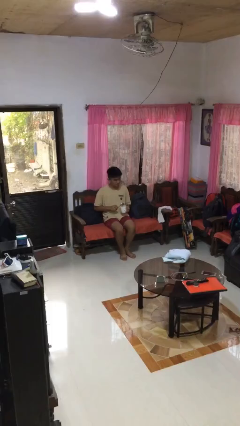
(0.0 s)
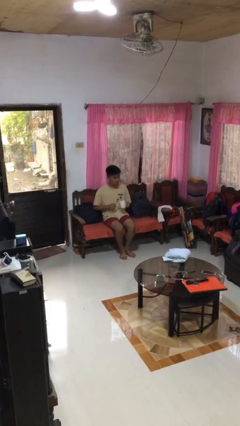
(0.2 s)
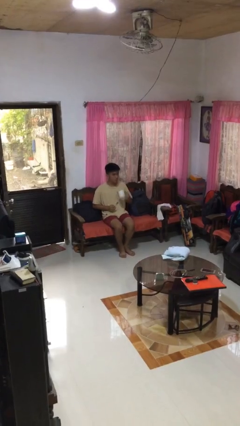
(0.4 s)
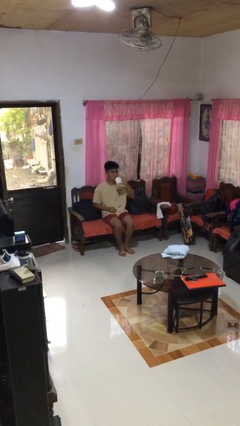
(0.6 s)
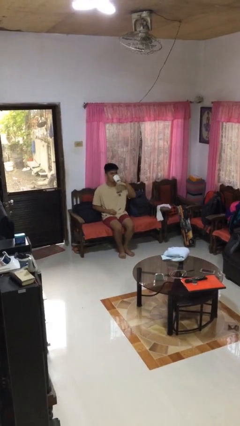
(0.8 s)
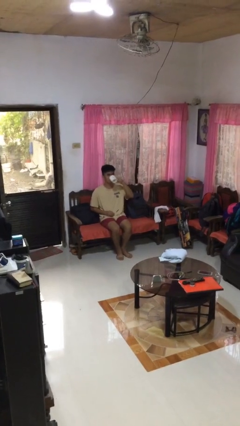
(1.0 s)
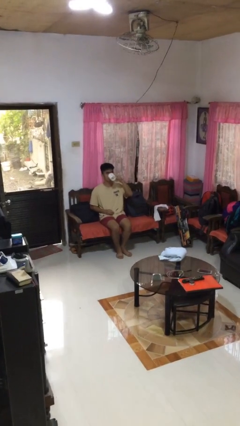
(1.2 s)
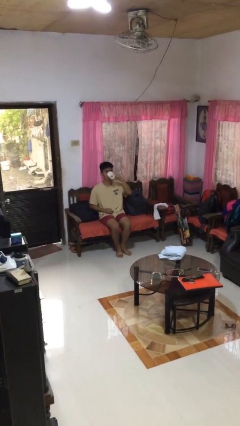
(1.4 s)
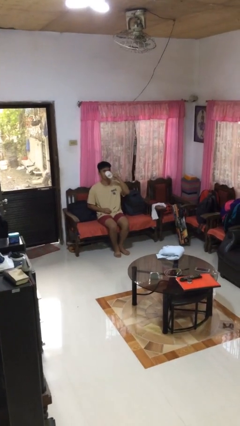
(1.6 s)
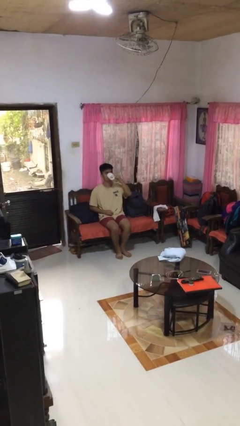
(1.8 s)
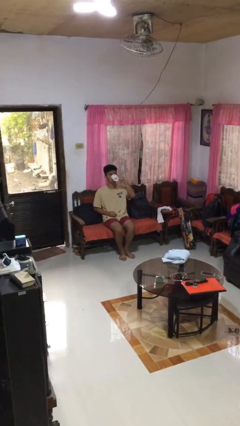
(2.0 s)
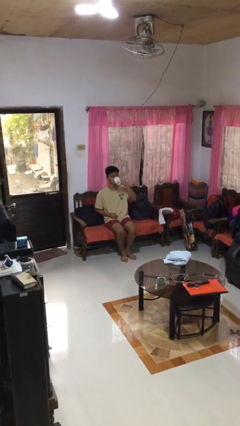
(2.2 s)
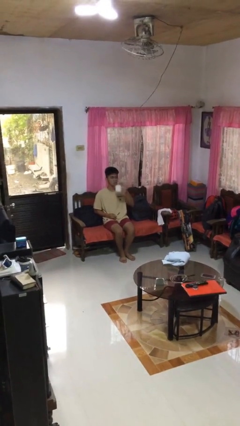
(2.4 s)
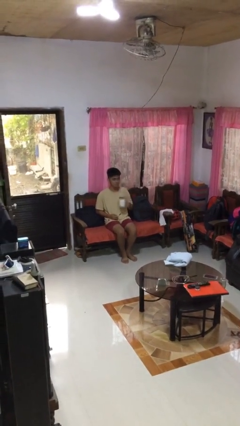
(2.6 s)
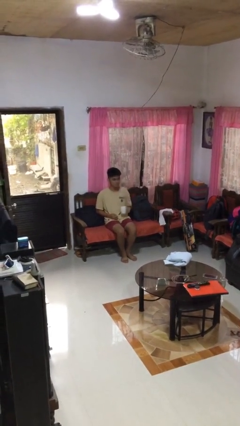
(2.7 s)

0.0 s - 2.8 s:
person drinks from mug

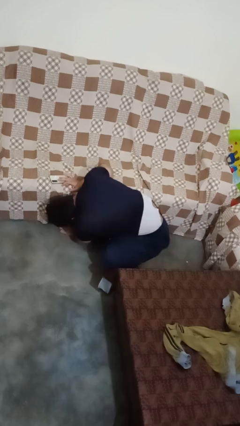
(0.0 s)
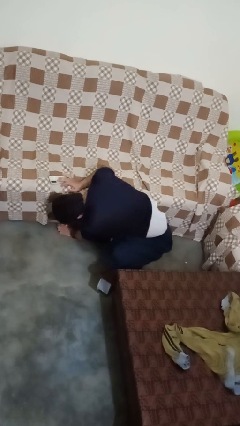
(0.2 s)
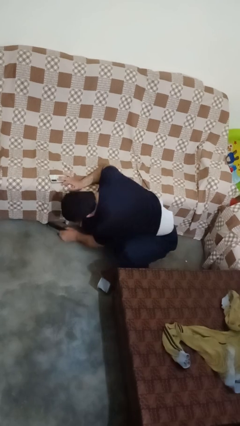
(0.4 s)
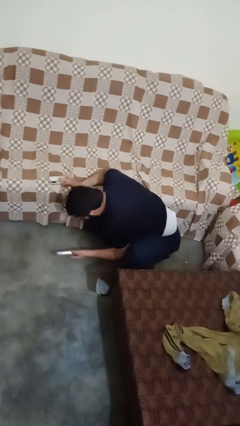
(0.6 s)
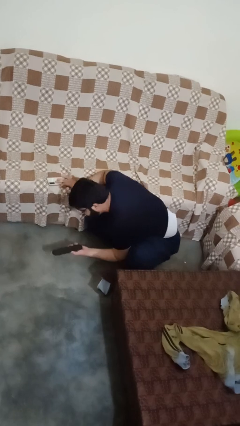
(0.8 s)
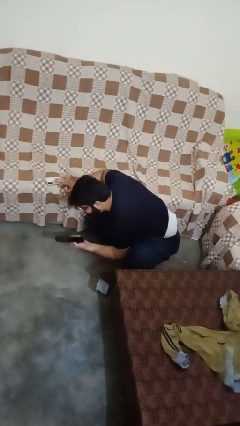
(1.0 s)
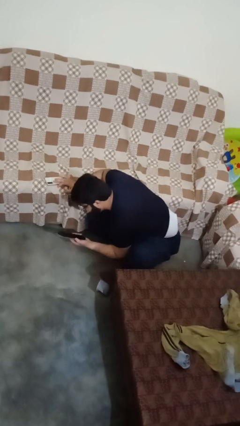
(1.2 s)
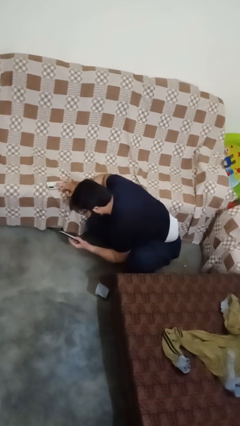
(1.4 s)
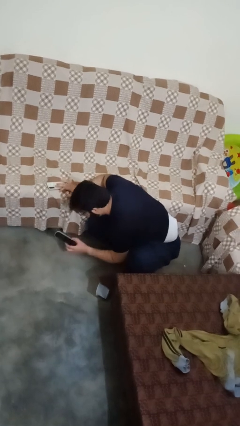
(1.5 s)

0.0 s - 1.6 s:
person searches under couch

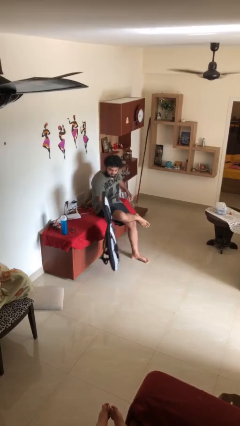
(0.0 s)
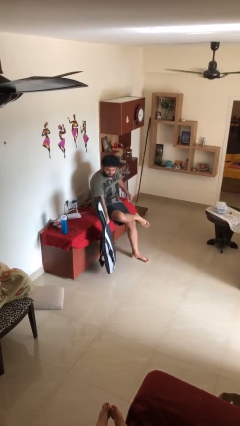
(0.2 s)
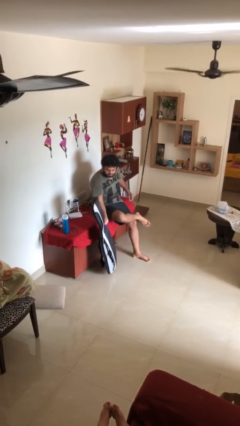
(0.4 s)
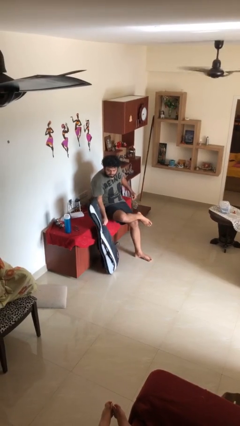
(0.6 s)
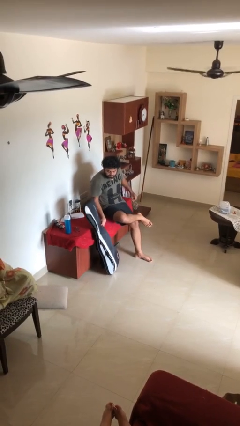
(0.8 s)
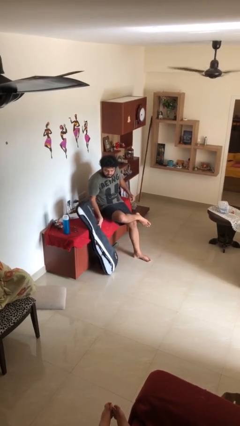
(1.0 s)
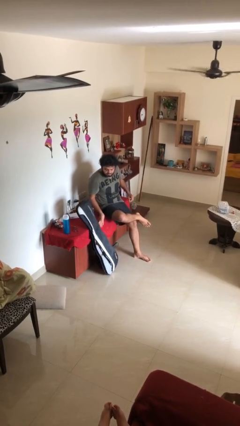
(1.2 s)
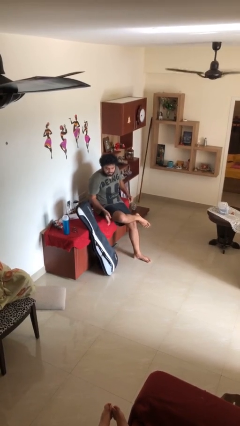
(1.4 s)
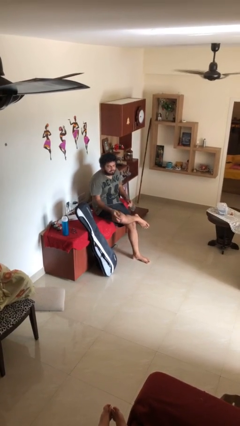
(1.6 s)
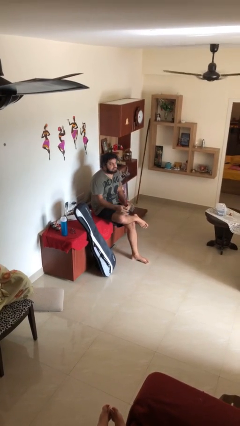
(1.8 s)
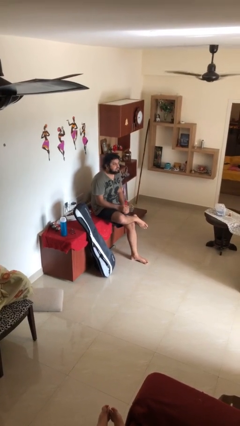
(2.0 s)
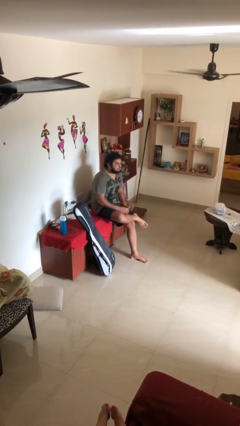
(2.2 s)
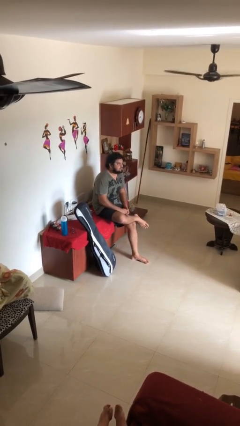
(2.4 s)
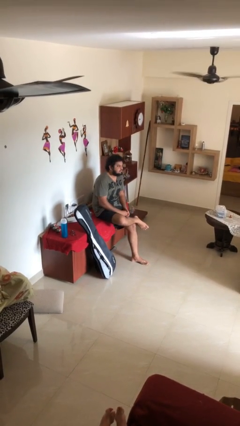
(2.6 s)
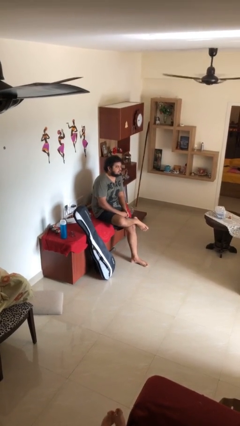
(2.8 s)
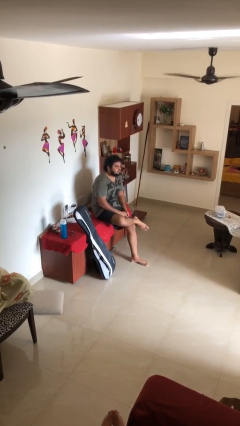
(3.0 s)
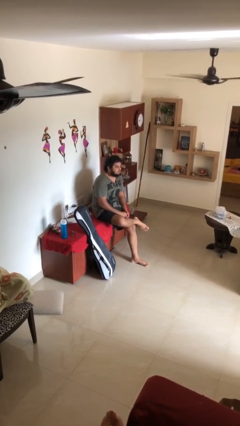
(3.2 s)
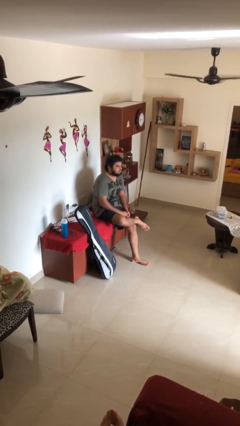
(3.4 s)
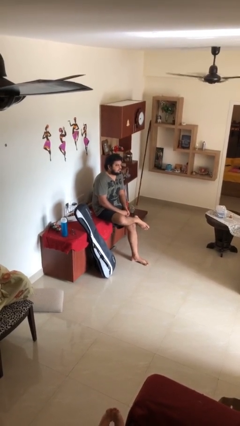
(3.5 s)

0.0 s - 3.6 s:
person puts down object on floor

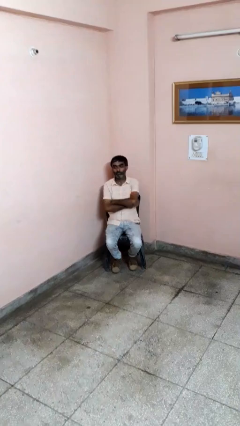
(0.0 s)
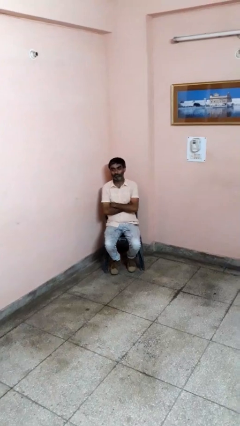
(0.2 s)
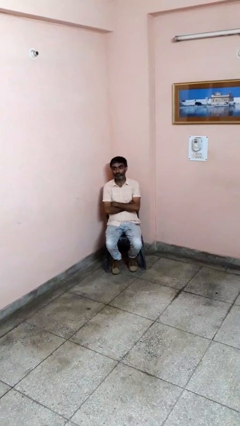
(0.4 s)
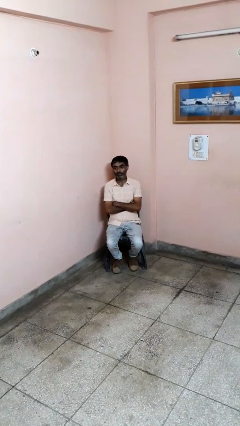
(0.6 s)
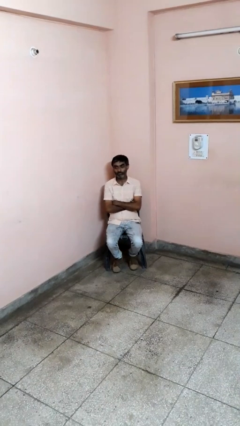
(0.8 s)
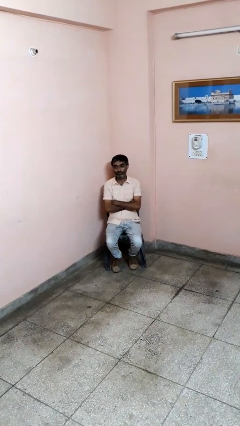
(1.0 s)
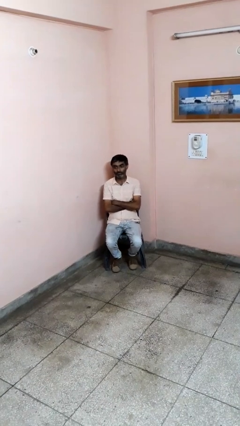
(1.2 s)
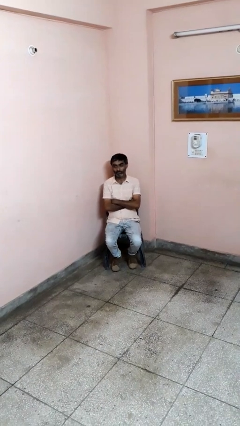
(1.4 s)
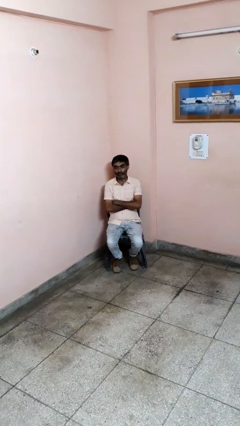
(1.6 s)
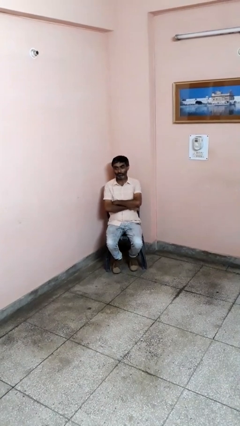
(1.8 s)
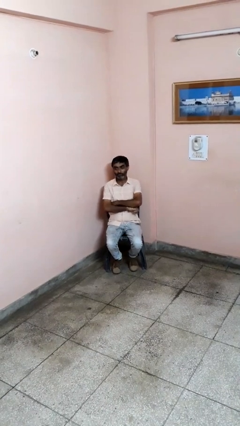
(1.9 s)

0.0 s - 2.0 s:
person crosses arms

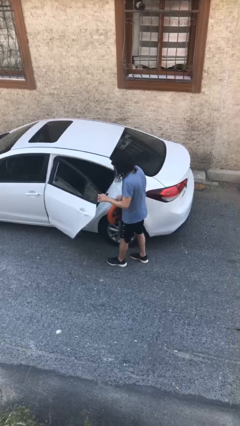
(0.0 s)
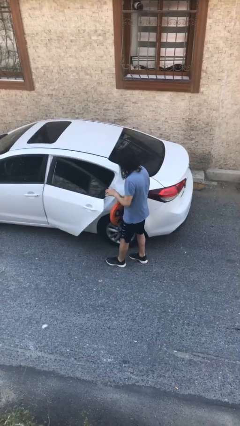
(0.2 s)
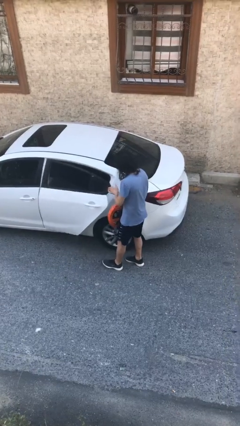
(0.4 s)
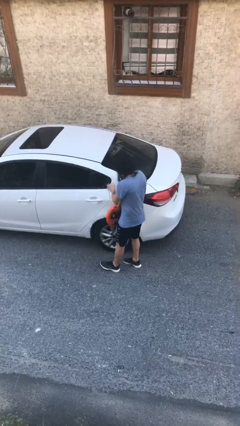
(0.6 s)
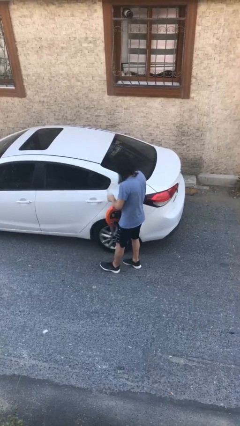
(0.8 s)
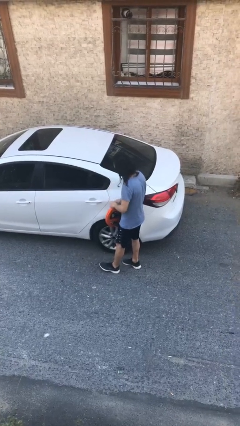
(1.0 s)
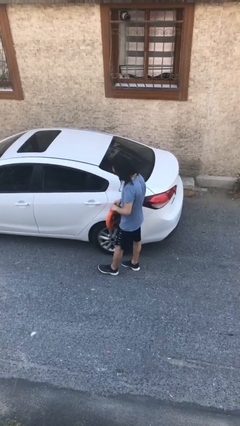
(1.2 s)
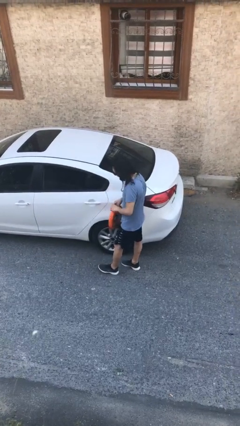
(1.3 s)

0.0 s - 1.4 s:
person closes car door

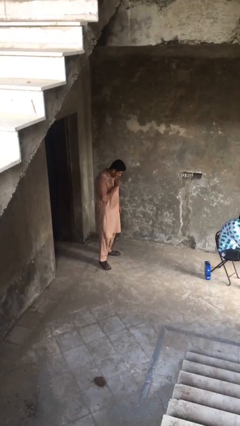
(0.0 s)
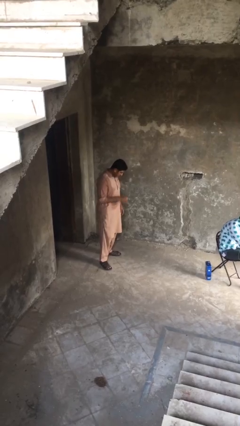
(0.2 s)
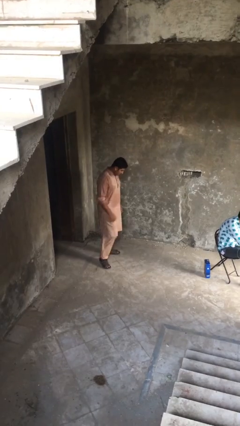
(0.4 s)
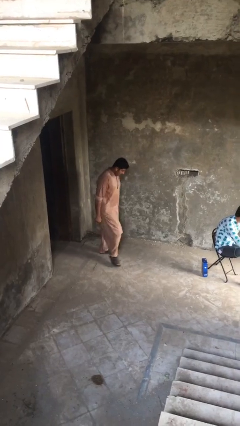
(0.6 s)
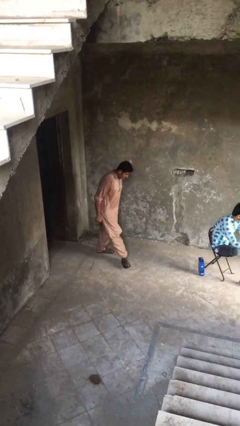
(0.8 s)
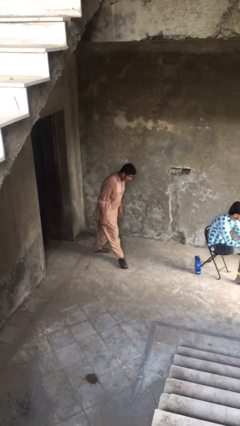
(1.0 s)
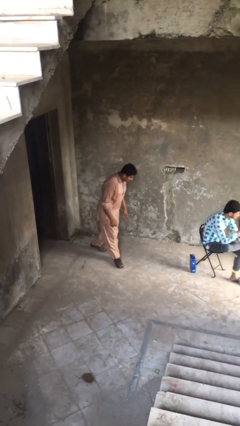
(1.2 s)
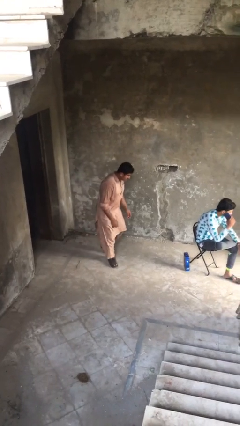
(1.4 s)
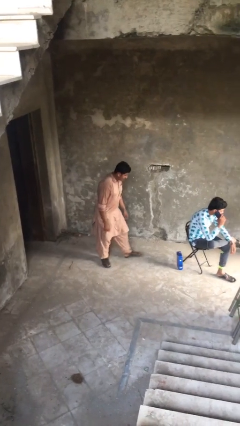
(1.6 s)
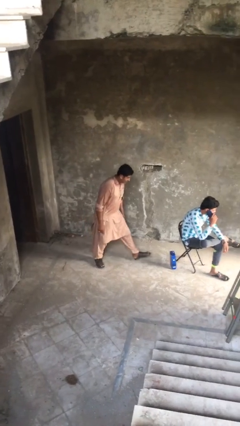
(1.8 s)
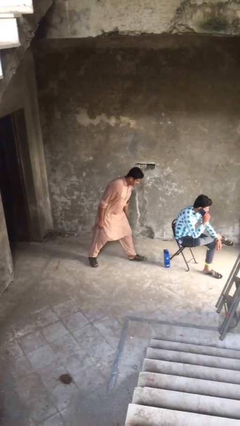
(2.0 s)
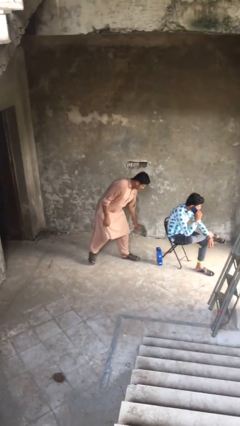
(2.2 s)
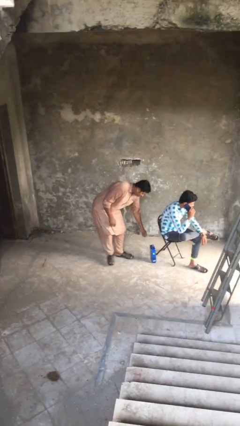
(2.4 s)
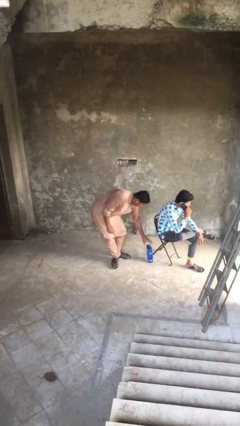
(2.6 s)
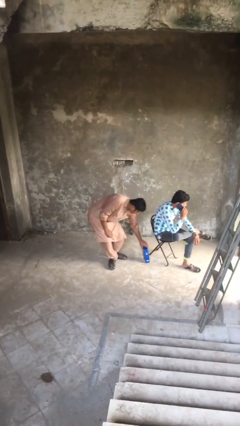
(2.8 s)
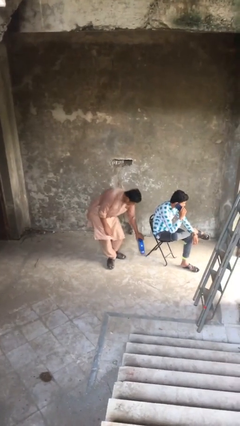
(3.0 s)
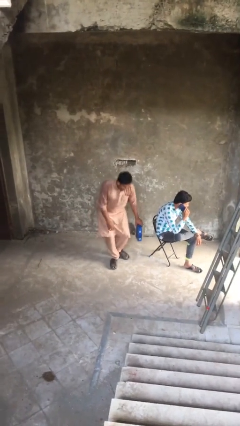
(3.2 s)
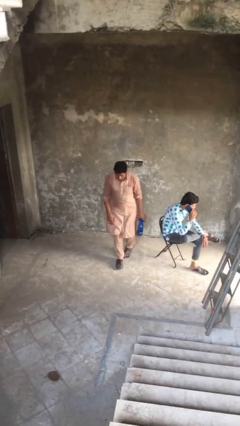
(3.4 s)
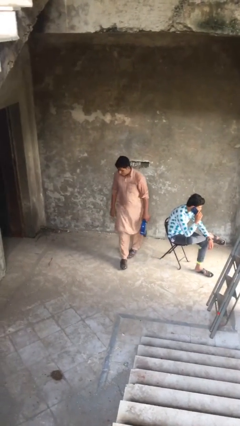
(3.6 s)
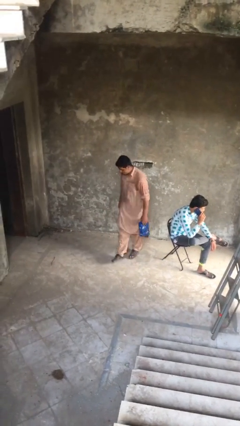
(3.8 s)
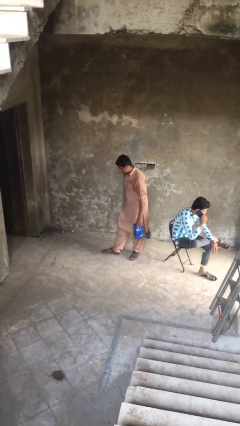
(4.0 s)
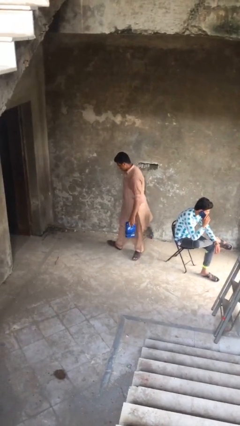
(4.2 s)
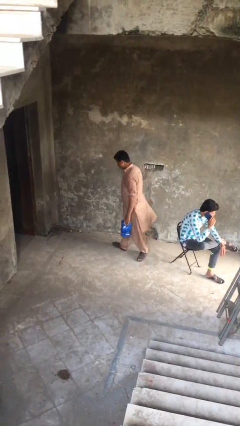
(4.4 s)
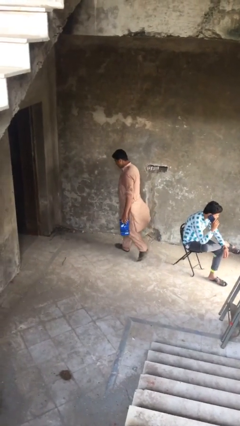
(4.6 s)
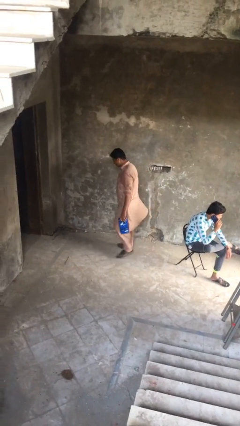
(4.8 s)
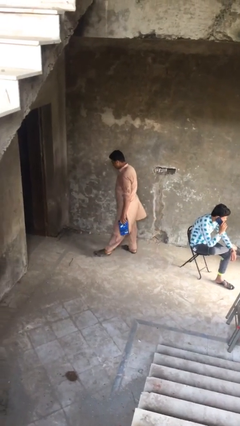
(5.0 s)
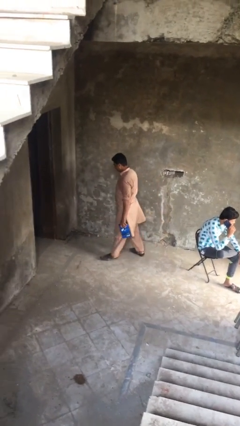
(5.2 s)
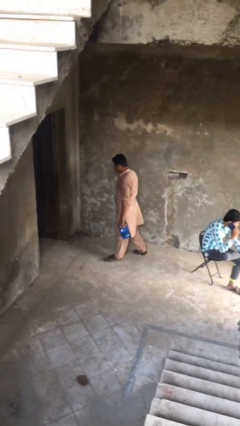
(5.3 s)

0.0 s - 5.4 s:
person steals object from person
